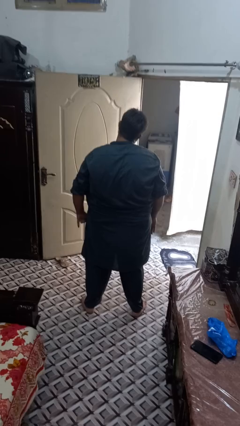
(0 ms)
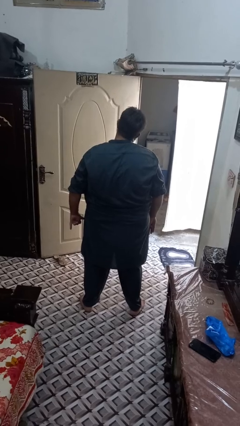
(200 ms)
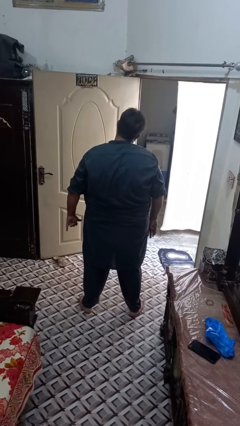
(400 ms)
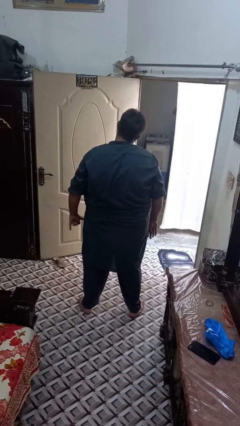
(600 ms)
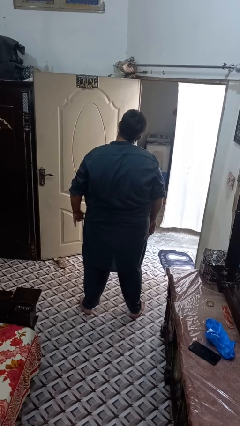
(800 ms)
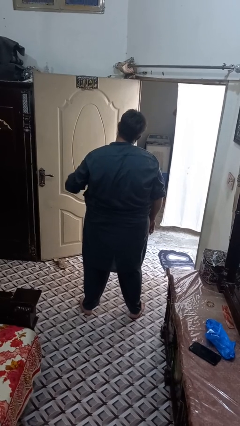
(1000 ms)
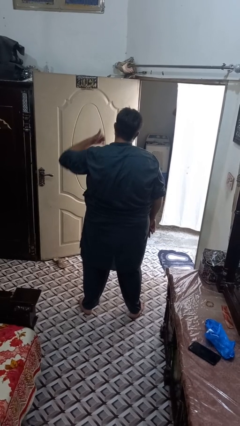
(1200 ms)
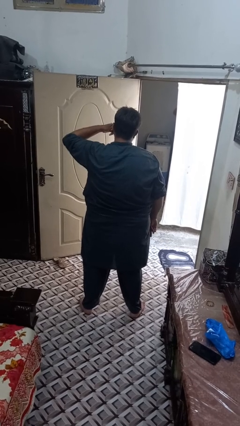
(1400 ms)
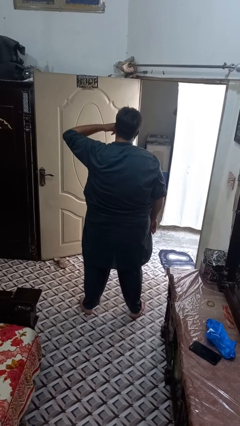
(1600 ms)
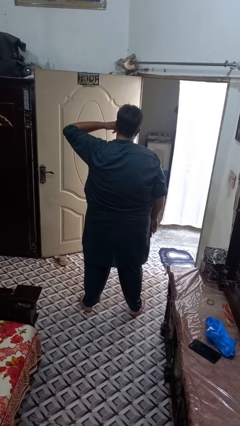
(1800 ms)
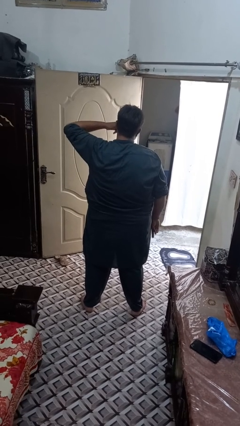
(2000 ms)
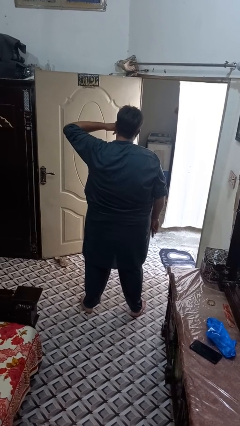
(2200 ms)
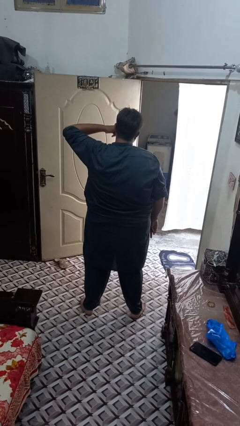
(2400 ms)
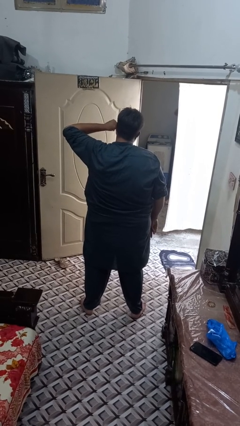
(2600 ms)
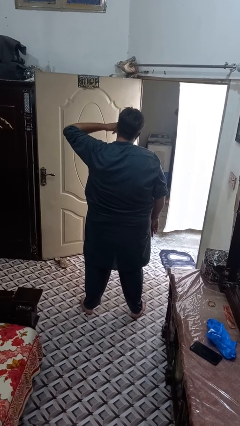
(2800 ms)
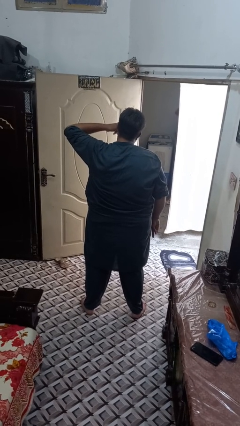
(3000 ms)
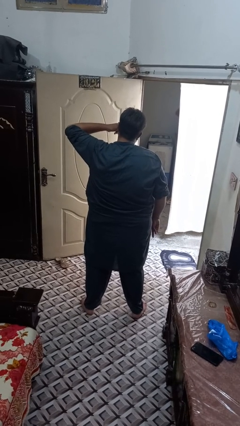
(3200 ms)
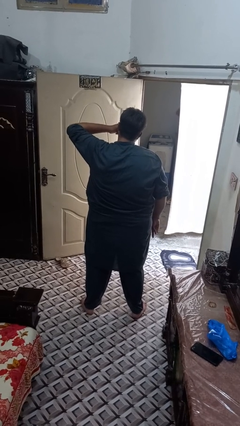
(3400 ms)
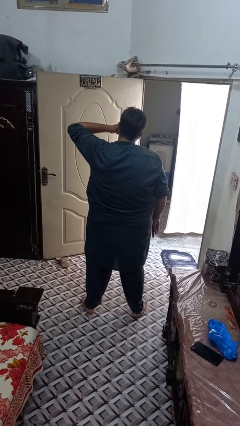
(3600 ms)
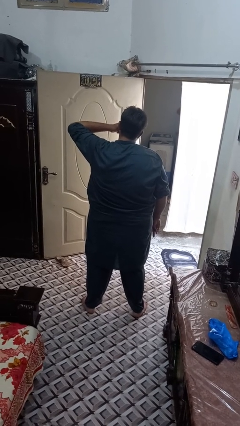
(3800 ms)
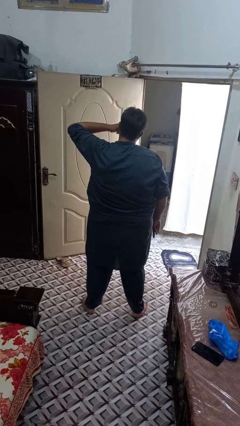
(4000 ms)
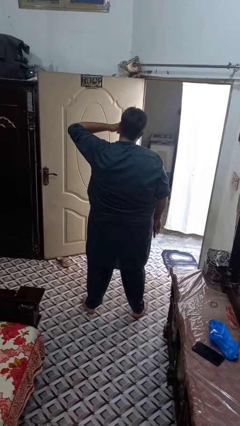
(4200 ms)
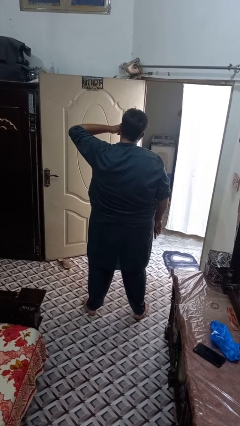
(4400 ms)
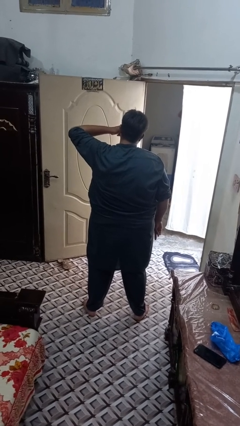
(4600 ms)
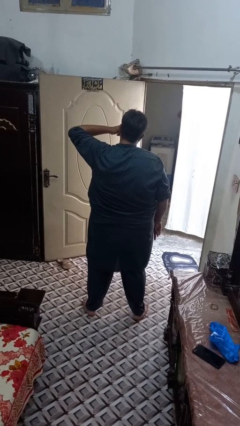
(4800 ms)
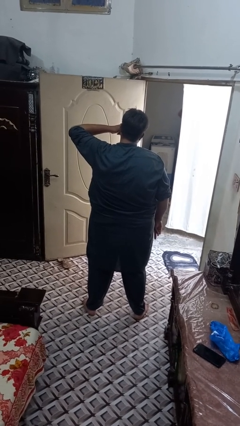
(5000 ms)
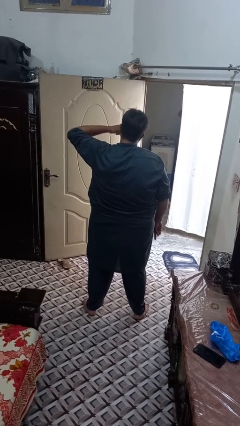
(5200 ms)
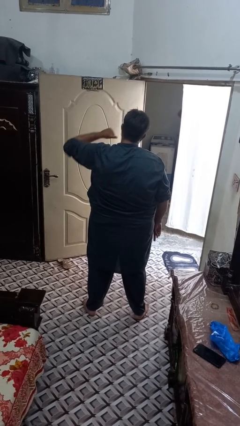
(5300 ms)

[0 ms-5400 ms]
person gestures call me

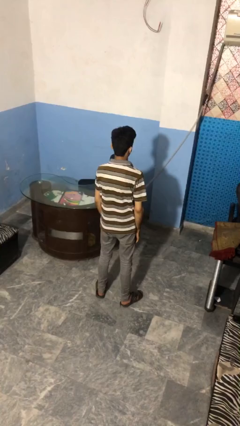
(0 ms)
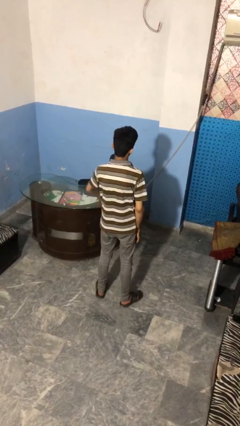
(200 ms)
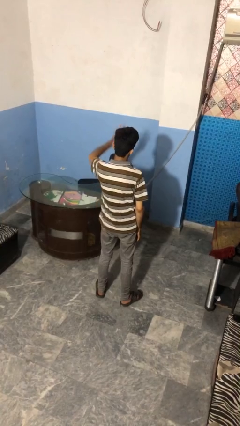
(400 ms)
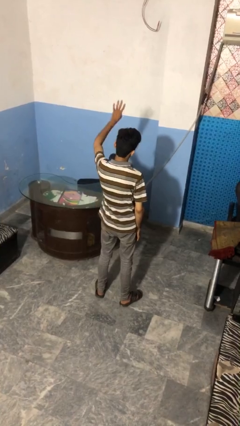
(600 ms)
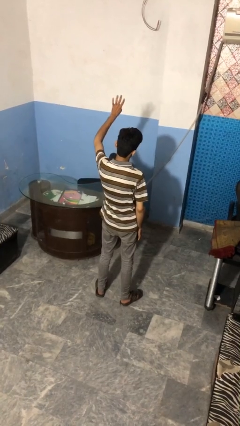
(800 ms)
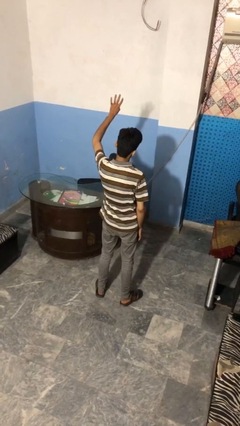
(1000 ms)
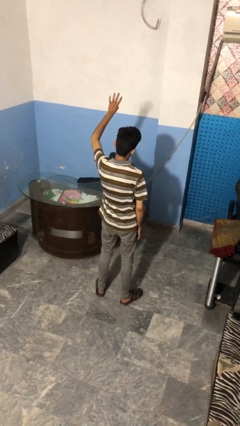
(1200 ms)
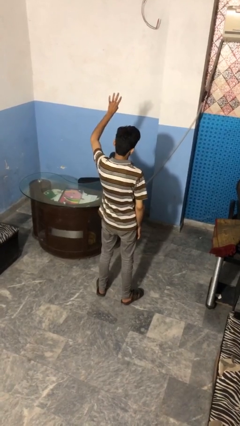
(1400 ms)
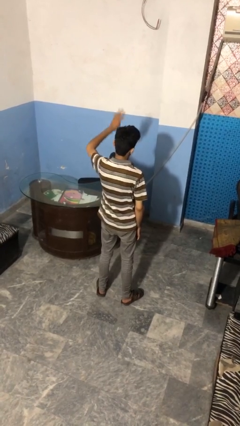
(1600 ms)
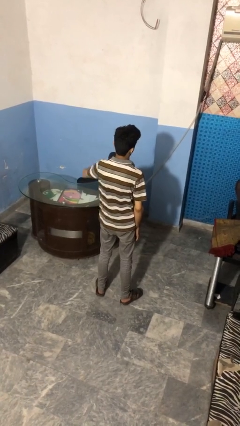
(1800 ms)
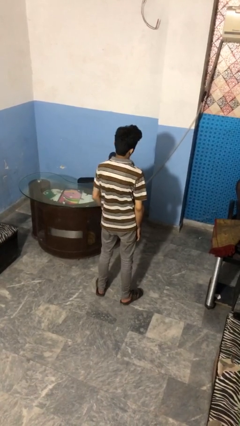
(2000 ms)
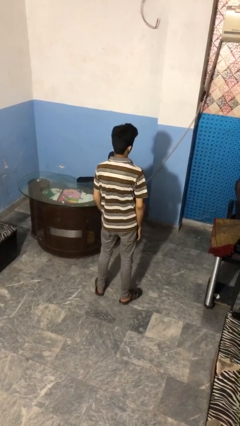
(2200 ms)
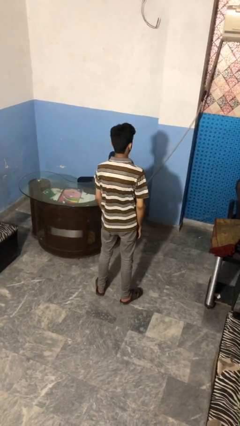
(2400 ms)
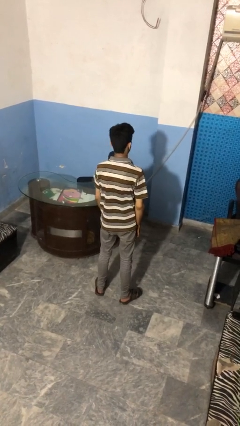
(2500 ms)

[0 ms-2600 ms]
person gestures number four

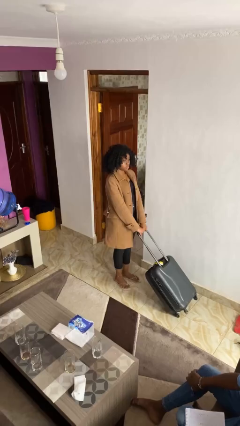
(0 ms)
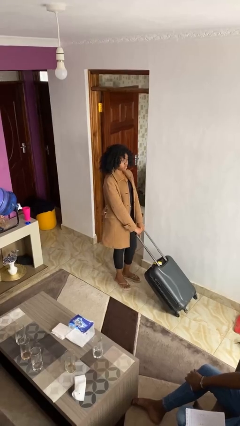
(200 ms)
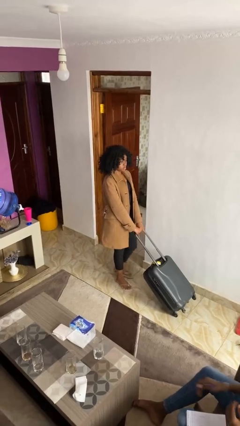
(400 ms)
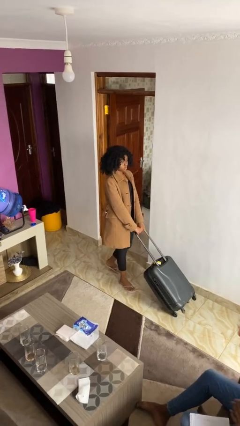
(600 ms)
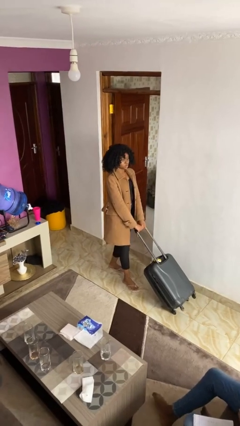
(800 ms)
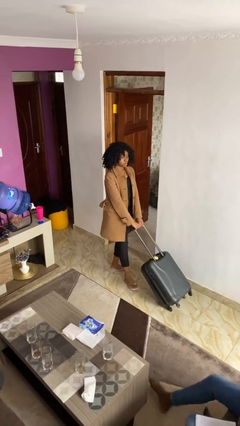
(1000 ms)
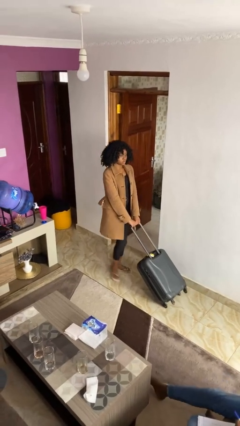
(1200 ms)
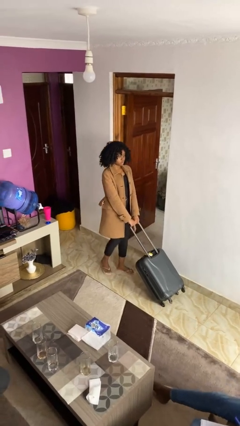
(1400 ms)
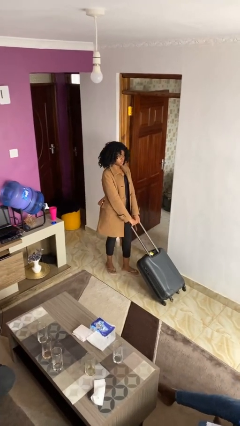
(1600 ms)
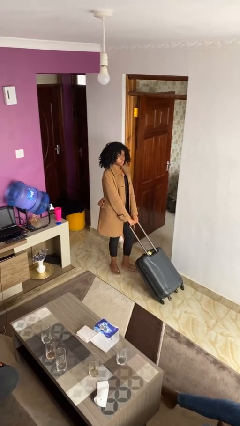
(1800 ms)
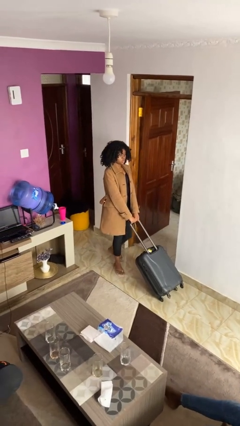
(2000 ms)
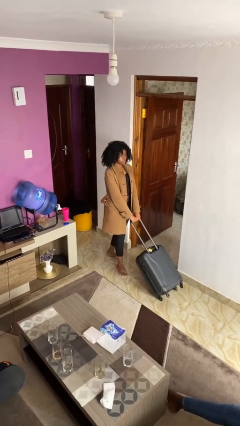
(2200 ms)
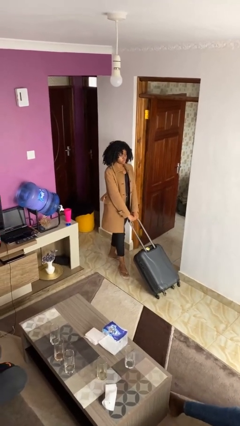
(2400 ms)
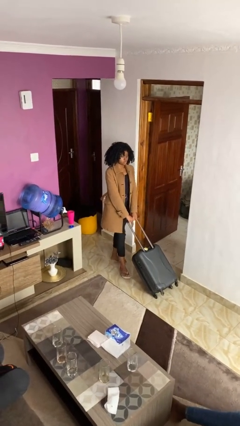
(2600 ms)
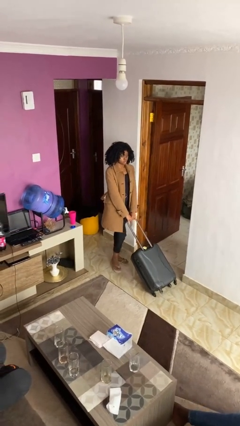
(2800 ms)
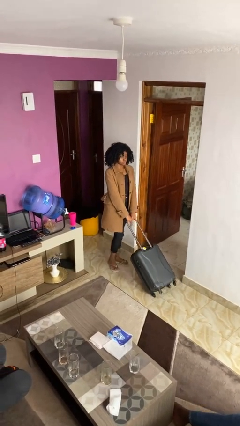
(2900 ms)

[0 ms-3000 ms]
person pulls wheeled cart

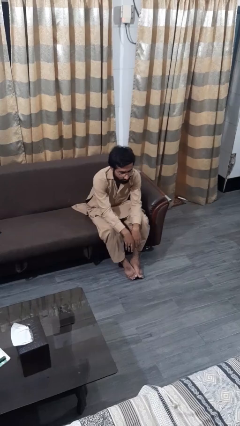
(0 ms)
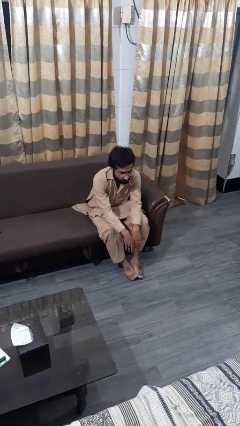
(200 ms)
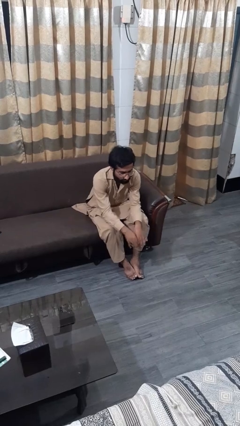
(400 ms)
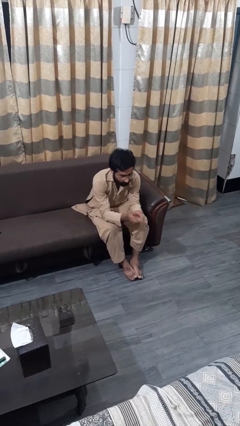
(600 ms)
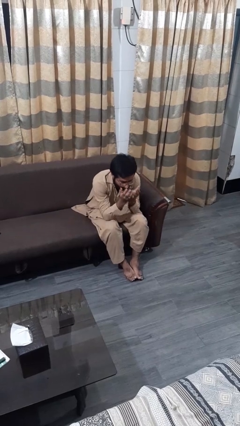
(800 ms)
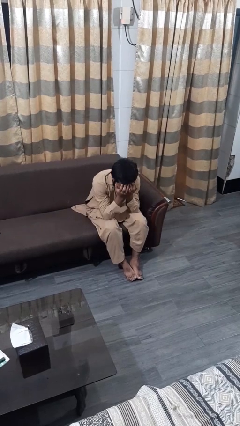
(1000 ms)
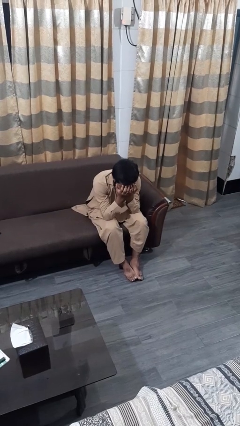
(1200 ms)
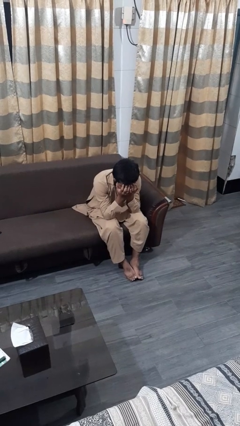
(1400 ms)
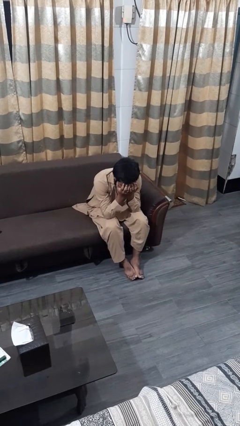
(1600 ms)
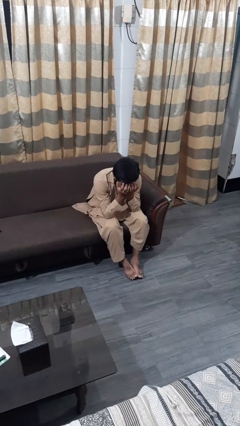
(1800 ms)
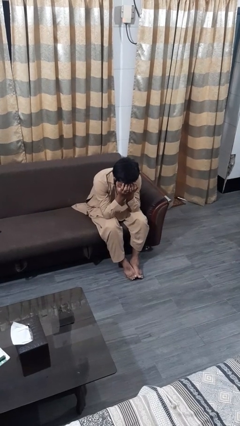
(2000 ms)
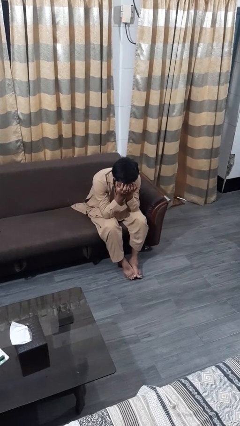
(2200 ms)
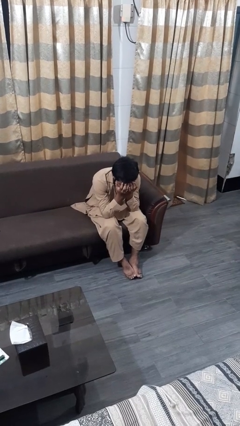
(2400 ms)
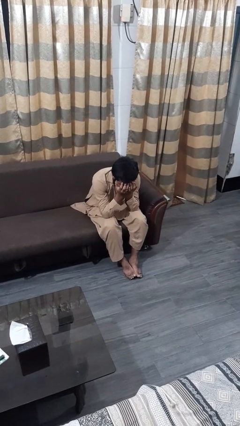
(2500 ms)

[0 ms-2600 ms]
person covers face with hands

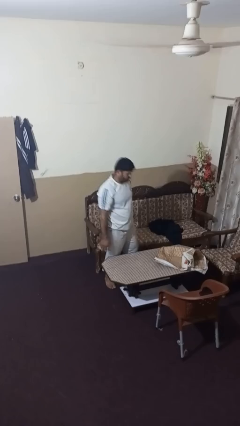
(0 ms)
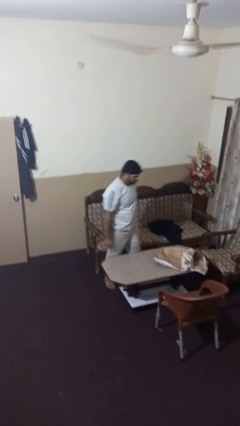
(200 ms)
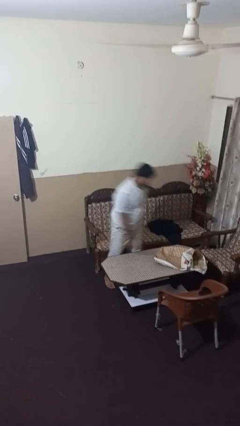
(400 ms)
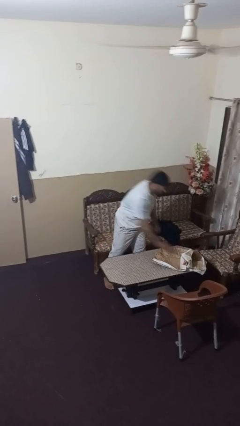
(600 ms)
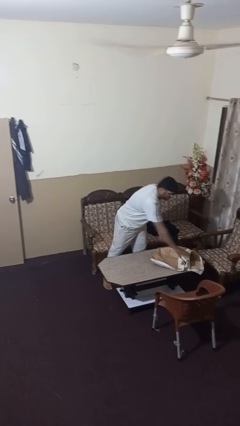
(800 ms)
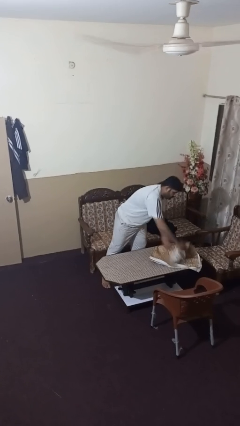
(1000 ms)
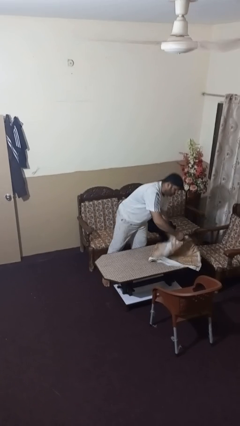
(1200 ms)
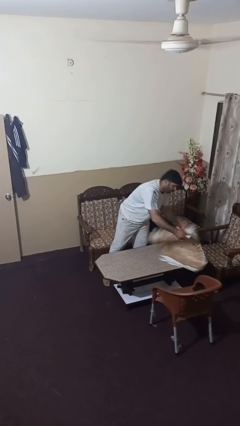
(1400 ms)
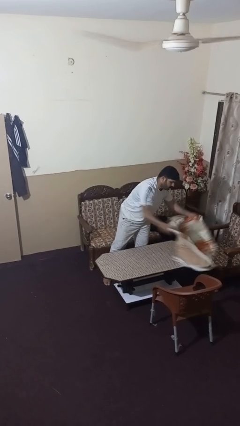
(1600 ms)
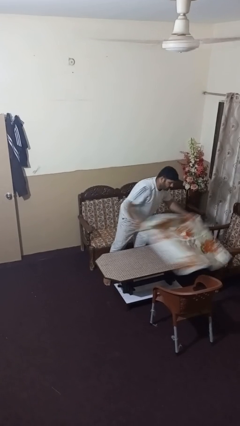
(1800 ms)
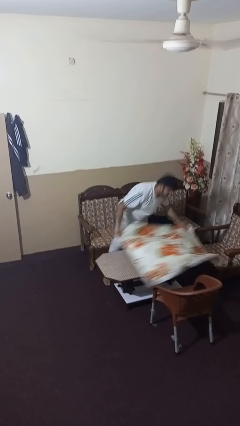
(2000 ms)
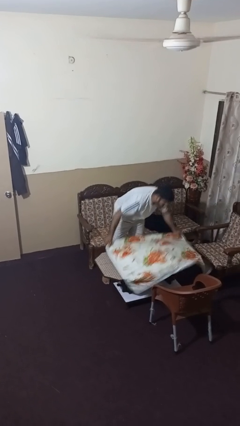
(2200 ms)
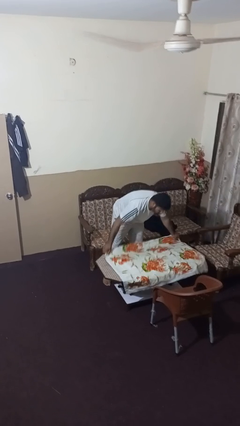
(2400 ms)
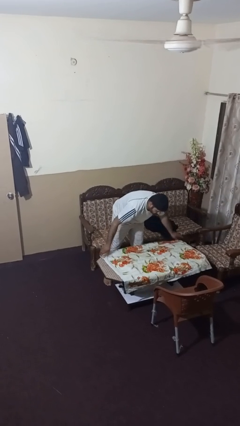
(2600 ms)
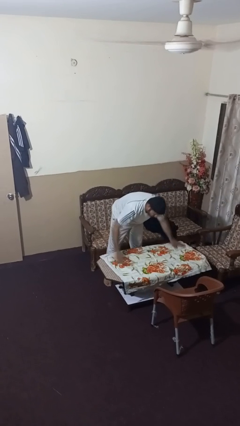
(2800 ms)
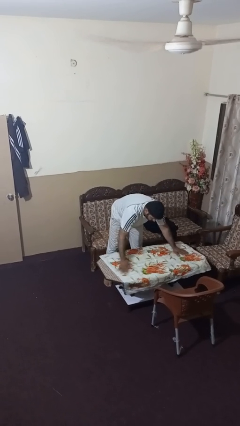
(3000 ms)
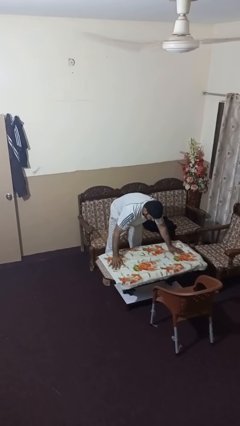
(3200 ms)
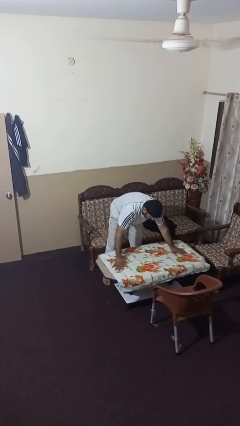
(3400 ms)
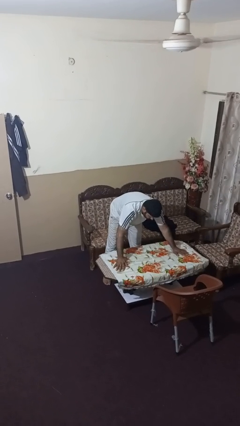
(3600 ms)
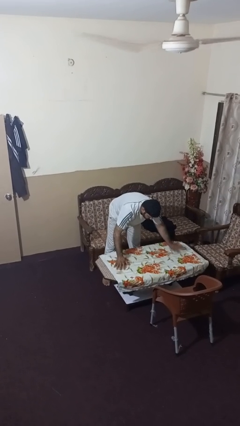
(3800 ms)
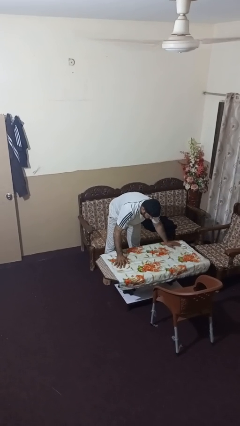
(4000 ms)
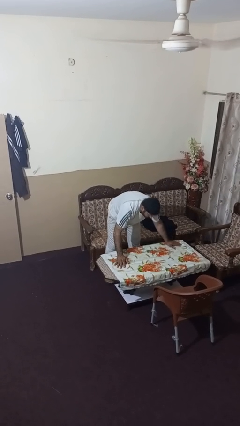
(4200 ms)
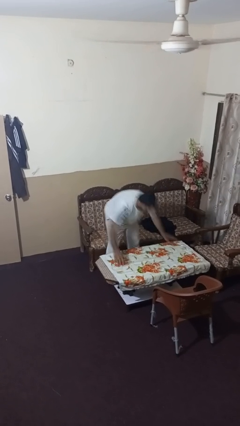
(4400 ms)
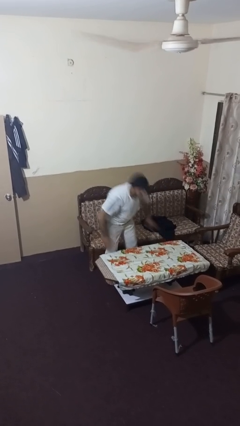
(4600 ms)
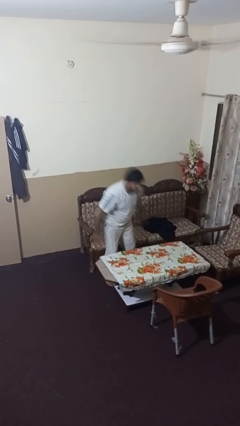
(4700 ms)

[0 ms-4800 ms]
person spreads tablecloth
